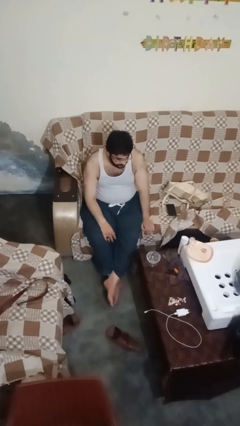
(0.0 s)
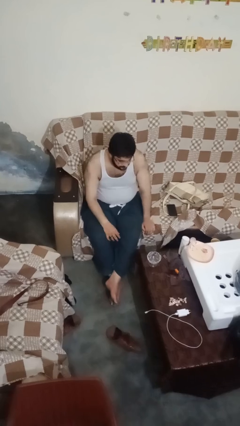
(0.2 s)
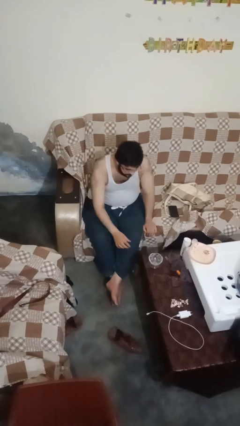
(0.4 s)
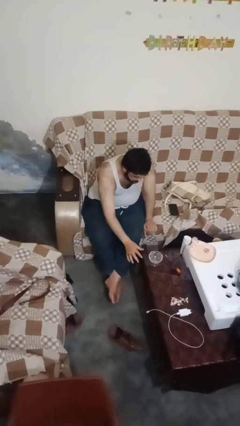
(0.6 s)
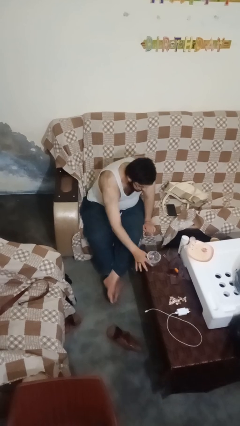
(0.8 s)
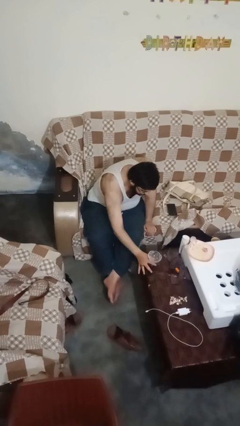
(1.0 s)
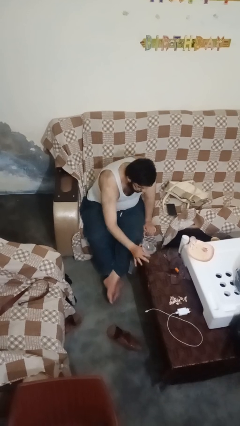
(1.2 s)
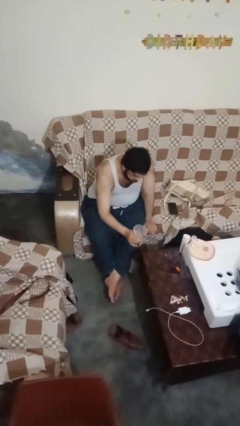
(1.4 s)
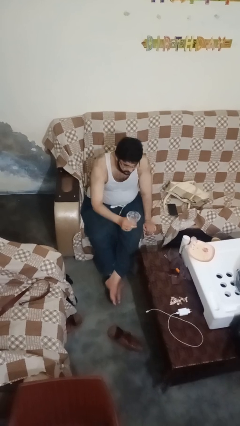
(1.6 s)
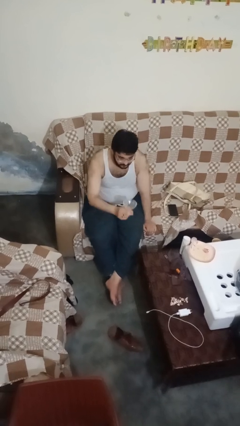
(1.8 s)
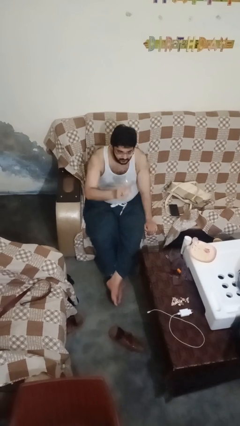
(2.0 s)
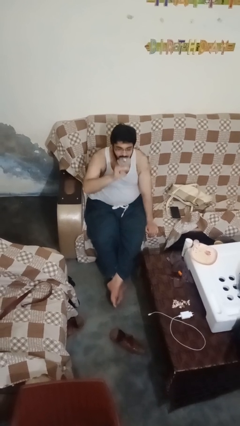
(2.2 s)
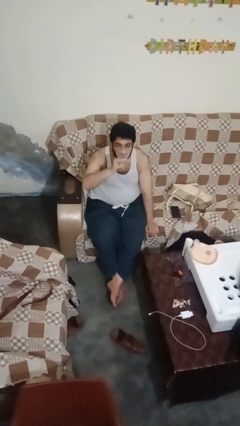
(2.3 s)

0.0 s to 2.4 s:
person picks up object from table

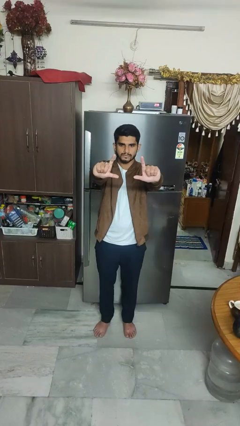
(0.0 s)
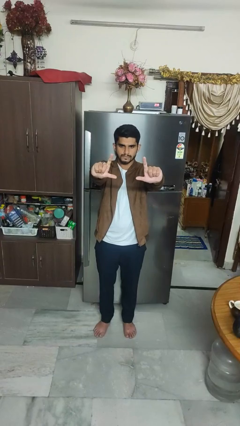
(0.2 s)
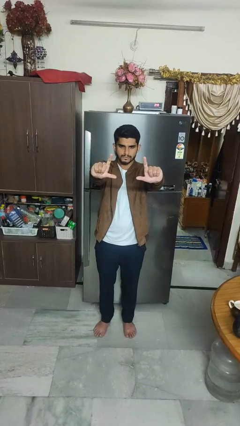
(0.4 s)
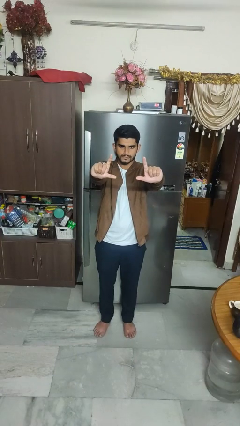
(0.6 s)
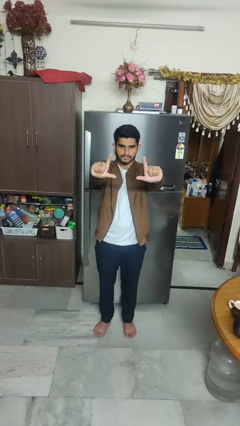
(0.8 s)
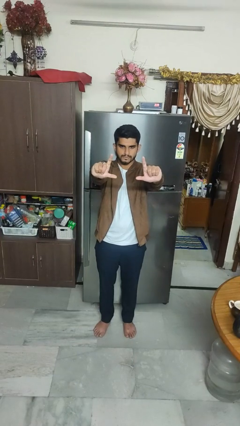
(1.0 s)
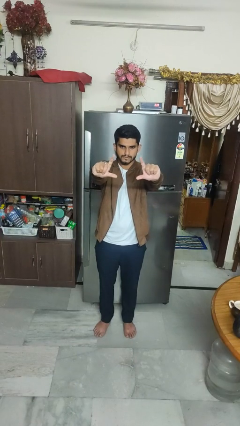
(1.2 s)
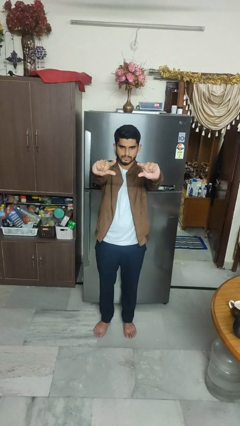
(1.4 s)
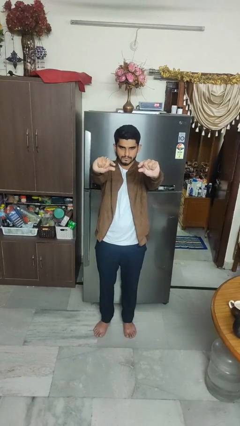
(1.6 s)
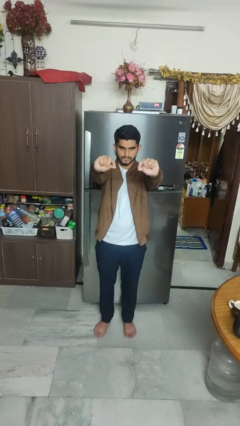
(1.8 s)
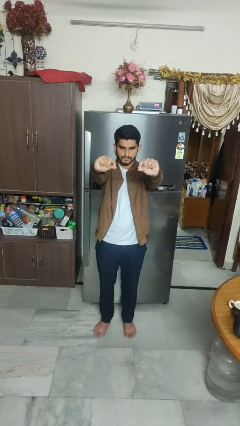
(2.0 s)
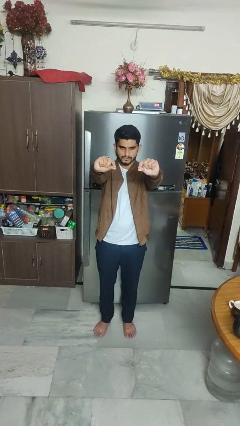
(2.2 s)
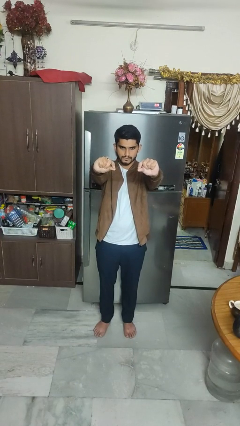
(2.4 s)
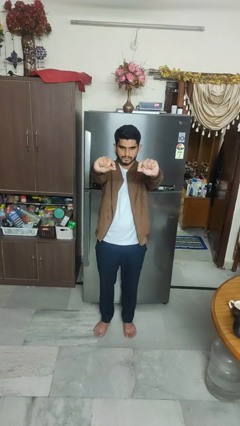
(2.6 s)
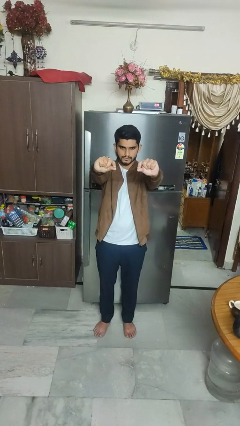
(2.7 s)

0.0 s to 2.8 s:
person gestures zoom in

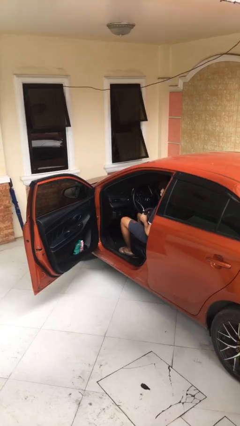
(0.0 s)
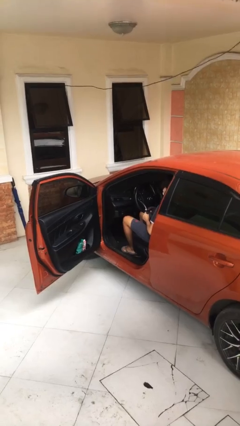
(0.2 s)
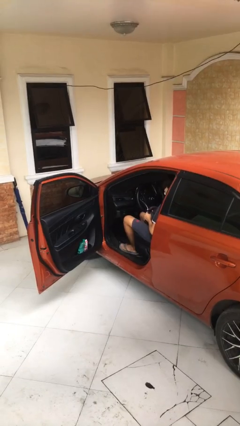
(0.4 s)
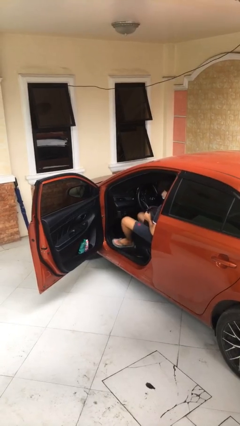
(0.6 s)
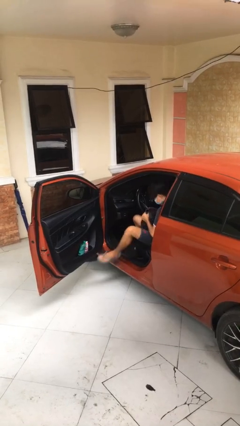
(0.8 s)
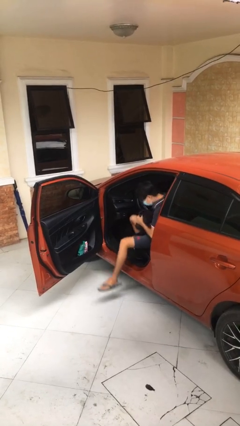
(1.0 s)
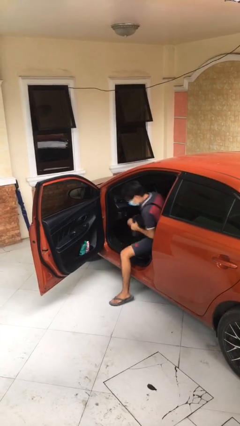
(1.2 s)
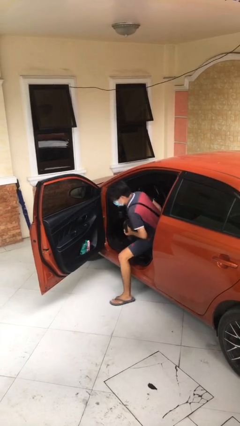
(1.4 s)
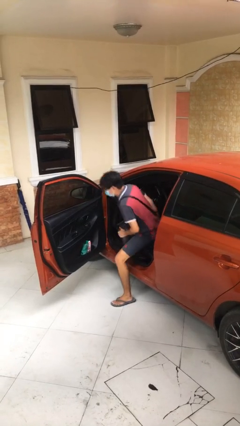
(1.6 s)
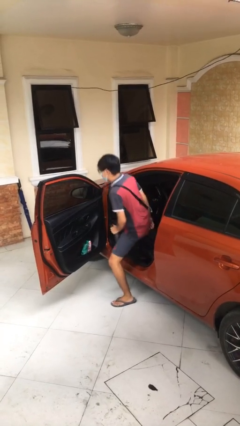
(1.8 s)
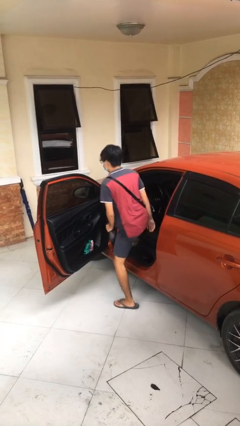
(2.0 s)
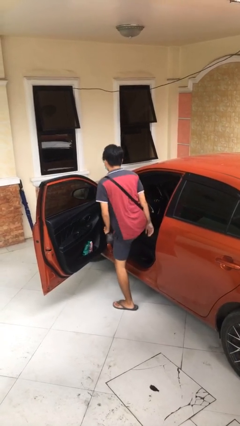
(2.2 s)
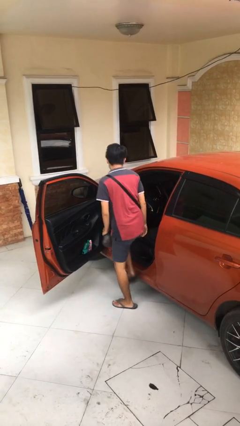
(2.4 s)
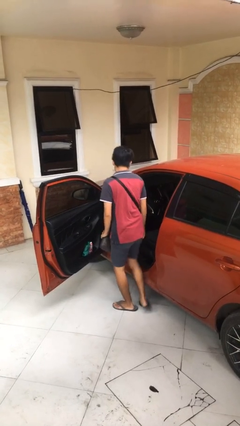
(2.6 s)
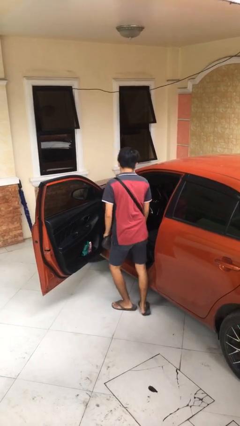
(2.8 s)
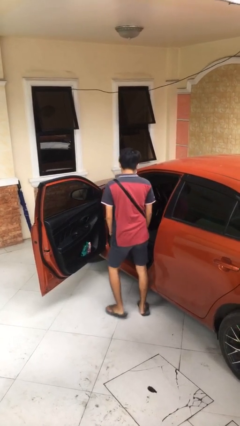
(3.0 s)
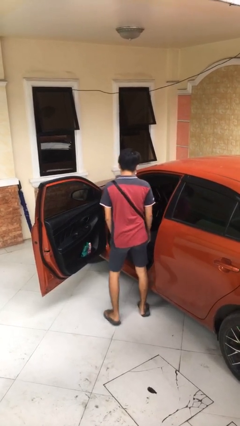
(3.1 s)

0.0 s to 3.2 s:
person exits car

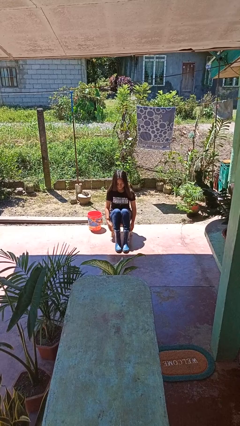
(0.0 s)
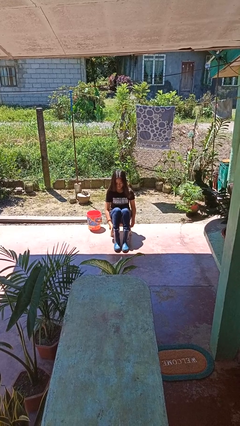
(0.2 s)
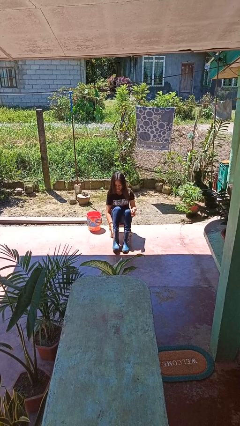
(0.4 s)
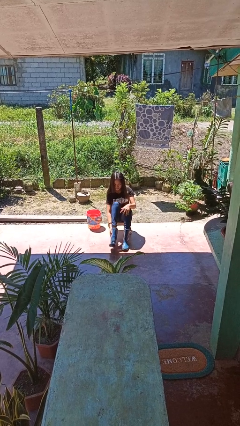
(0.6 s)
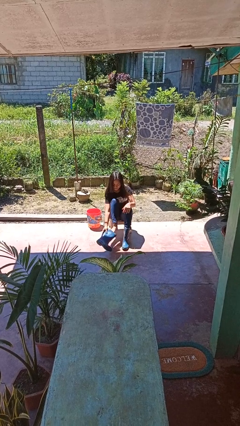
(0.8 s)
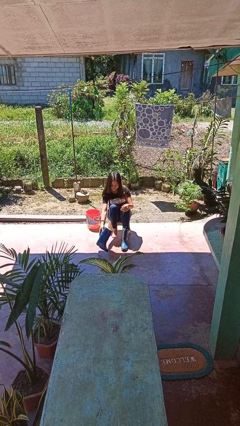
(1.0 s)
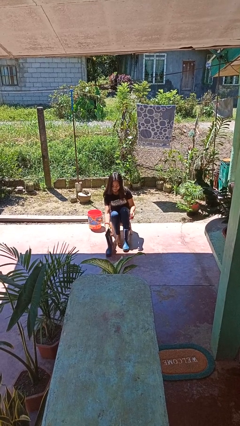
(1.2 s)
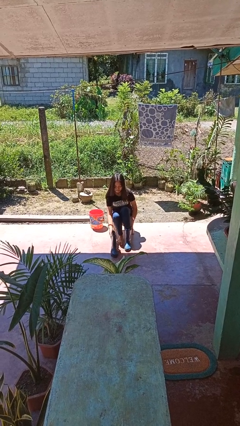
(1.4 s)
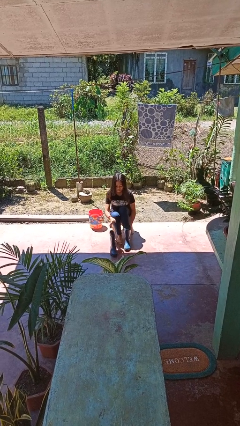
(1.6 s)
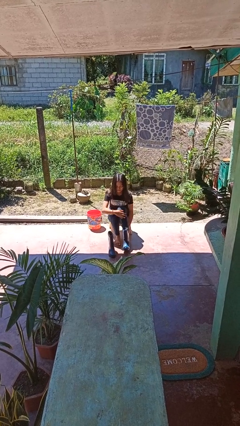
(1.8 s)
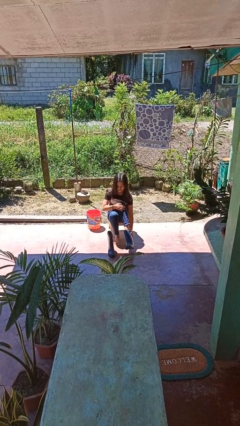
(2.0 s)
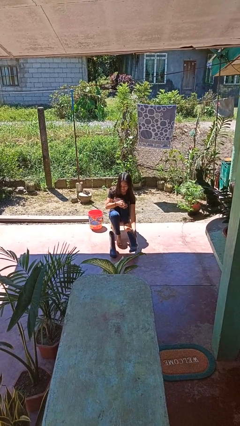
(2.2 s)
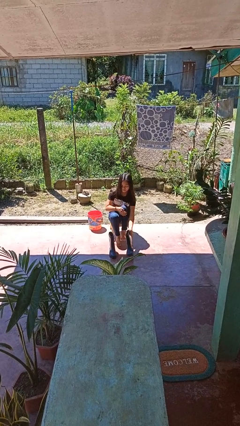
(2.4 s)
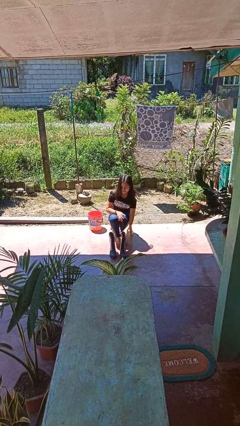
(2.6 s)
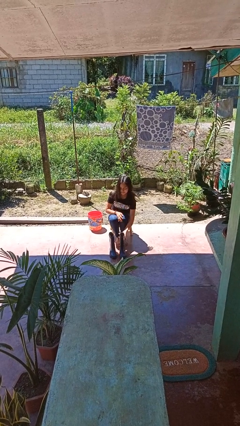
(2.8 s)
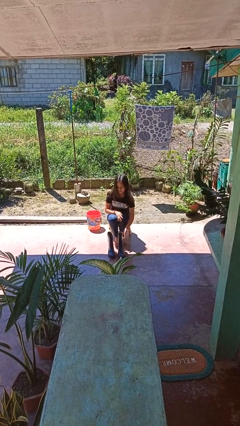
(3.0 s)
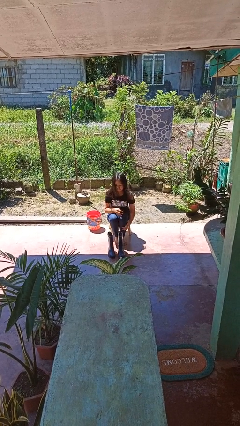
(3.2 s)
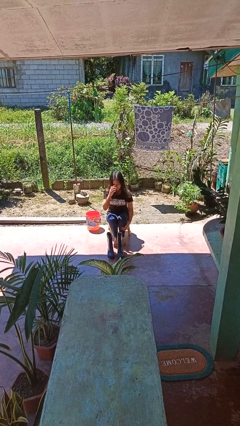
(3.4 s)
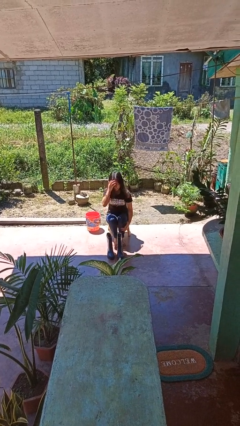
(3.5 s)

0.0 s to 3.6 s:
person takes off boots

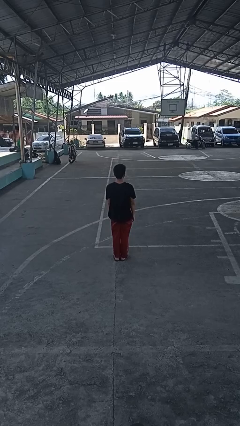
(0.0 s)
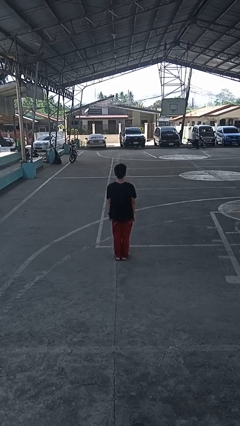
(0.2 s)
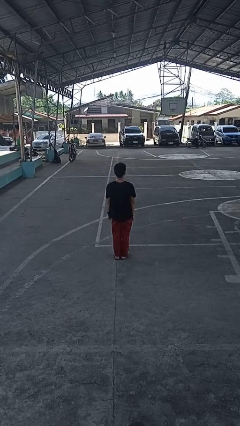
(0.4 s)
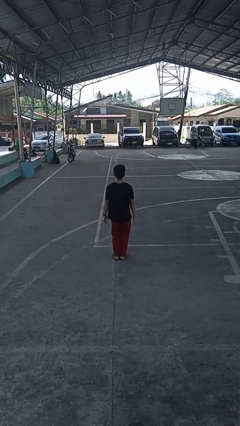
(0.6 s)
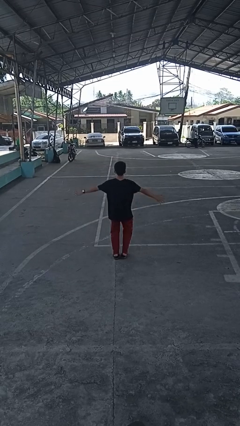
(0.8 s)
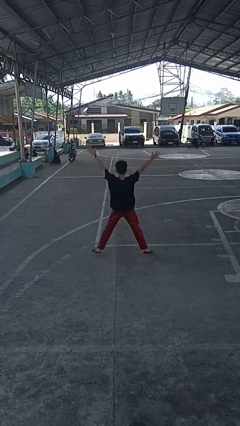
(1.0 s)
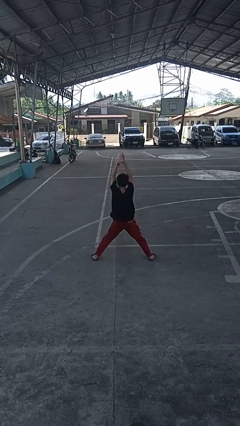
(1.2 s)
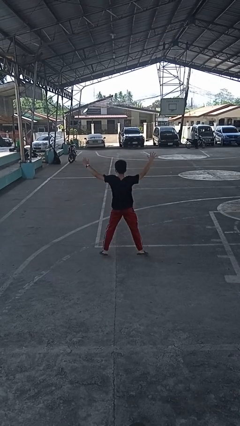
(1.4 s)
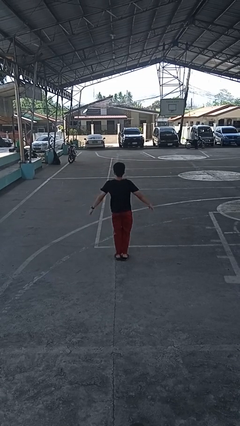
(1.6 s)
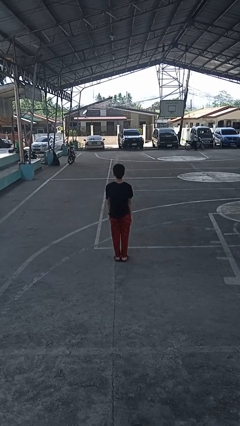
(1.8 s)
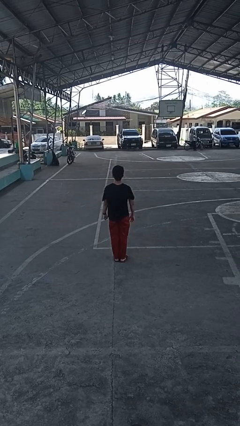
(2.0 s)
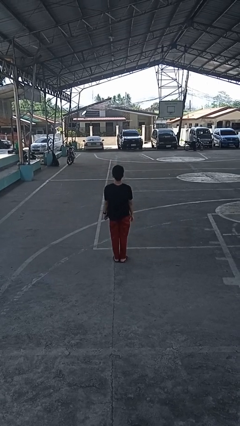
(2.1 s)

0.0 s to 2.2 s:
person exercises with jumping jacks

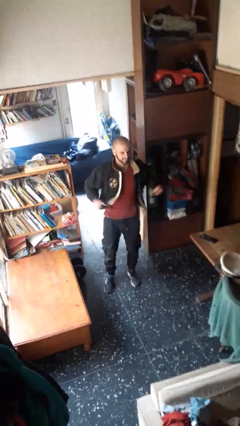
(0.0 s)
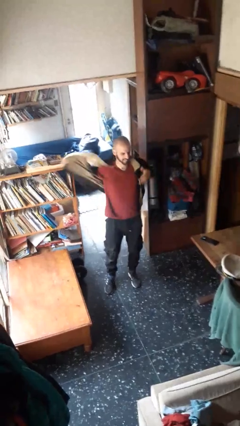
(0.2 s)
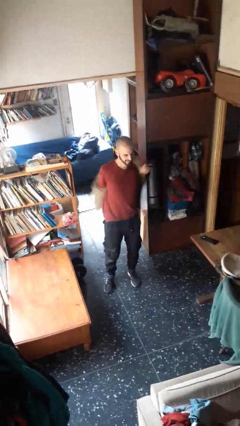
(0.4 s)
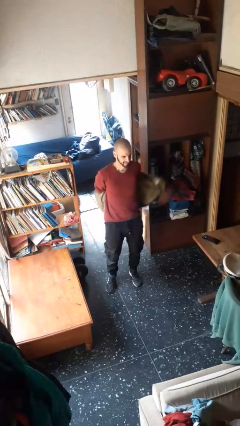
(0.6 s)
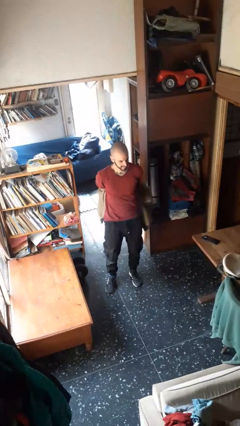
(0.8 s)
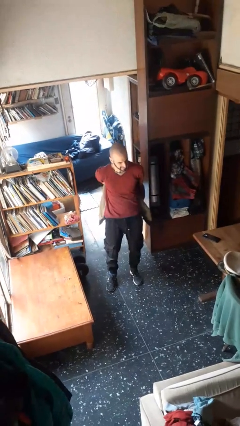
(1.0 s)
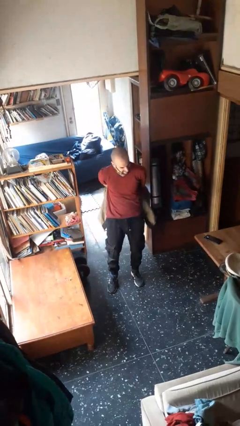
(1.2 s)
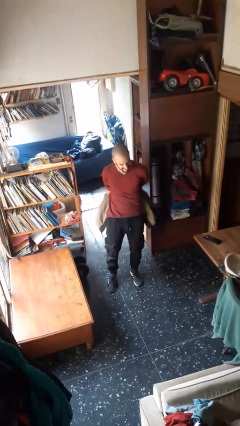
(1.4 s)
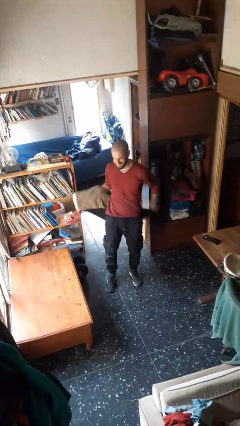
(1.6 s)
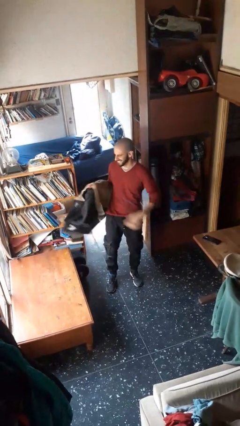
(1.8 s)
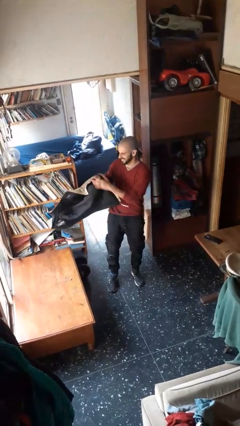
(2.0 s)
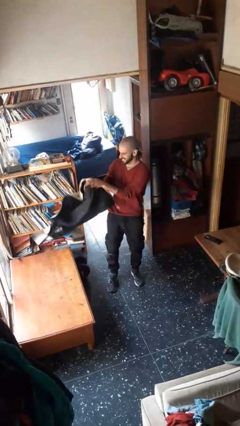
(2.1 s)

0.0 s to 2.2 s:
person takes off jacket

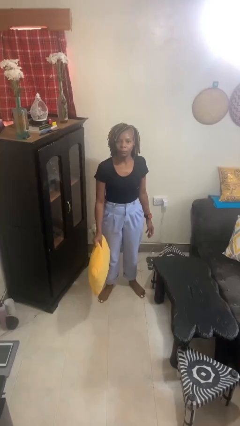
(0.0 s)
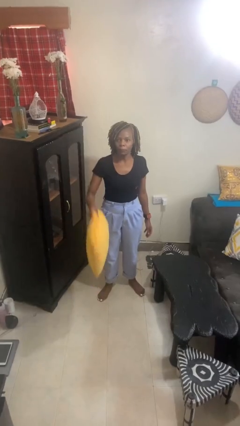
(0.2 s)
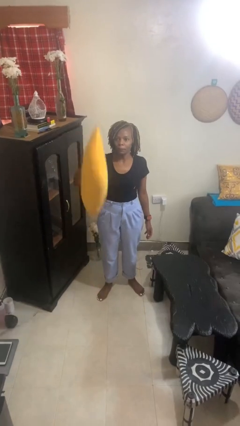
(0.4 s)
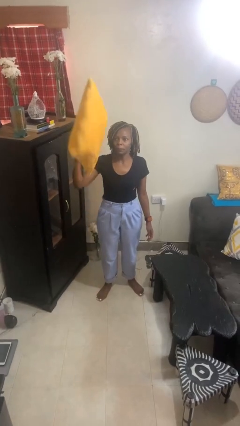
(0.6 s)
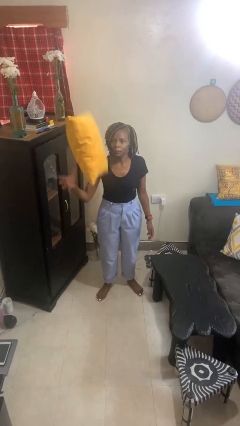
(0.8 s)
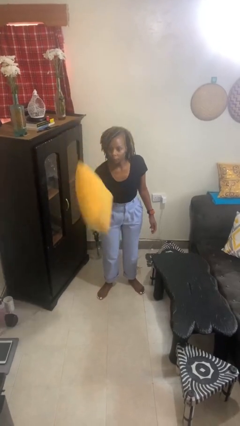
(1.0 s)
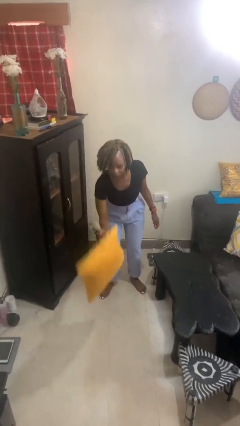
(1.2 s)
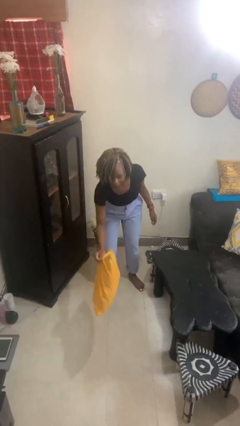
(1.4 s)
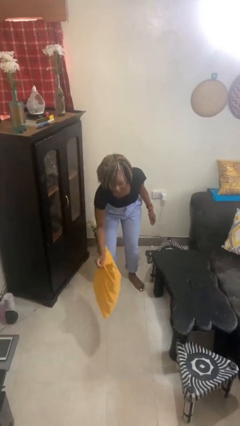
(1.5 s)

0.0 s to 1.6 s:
person drops object
